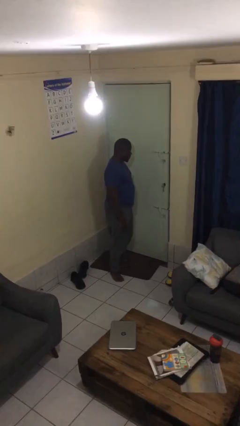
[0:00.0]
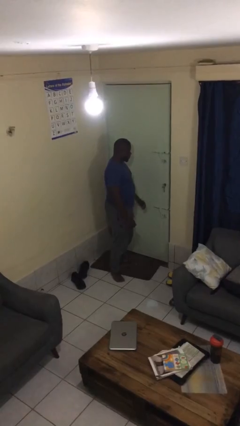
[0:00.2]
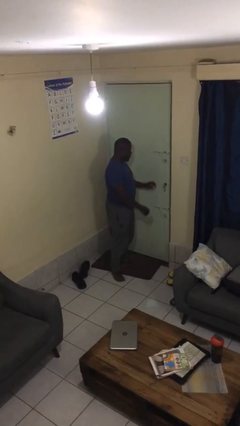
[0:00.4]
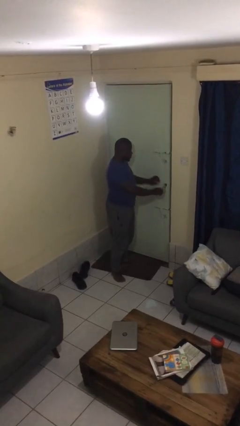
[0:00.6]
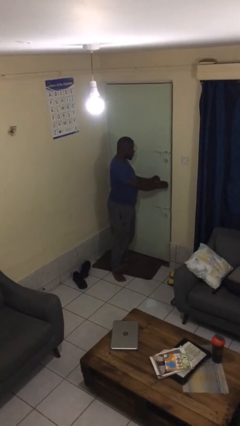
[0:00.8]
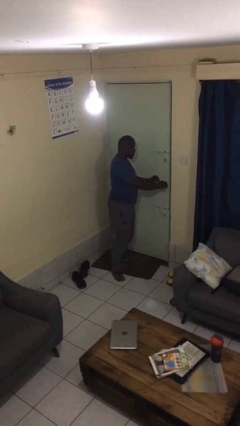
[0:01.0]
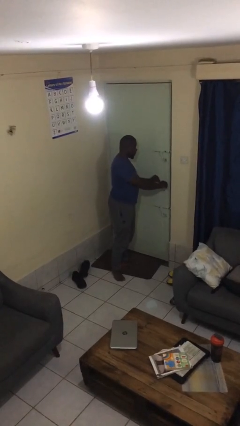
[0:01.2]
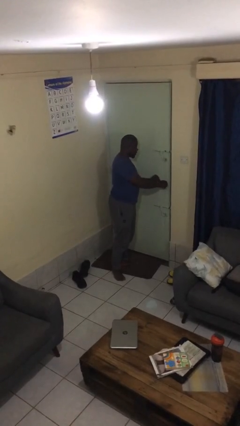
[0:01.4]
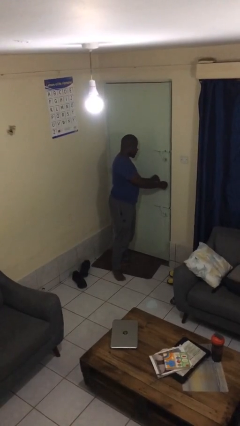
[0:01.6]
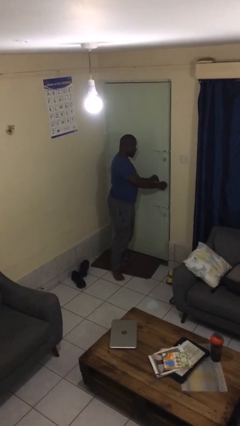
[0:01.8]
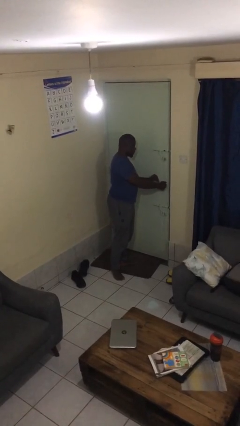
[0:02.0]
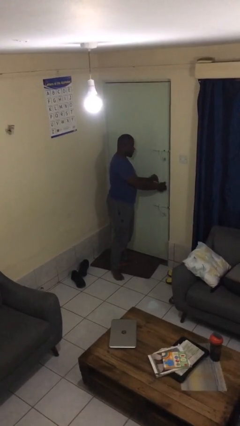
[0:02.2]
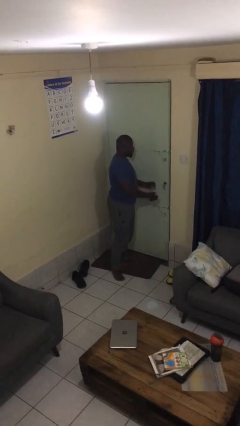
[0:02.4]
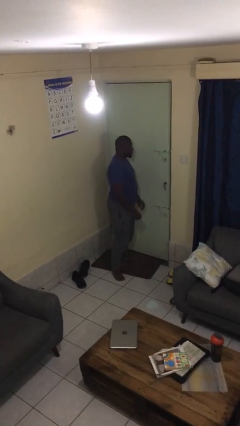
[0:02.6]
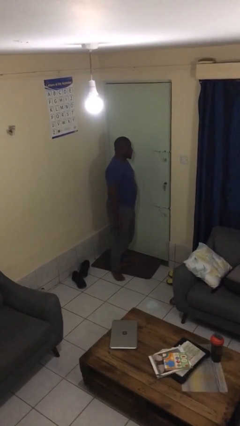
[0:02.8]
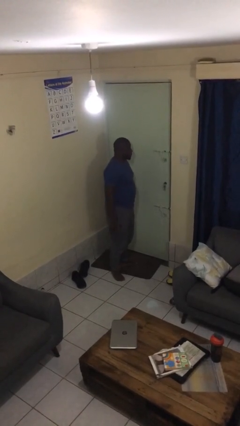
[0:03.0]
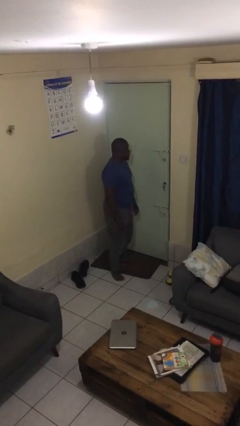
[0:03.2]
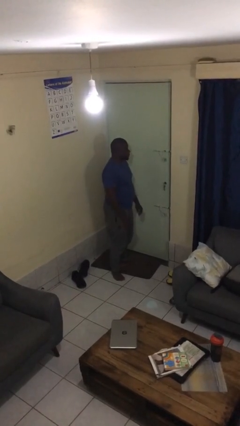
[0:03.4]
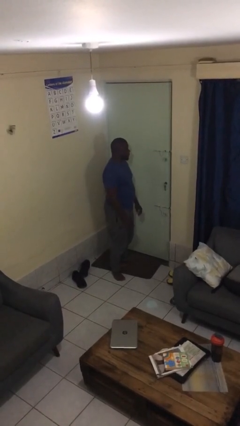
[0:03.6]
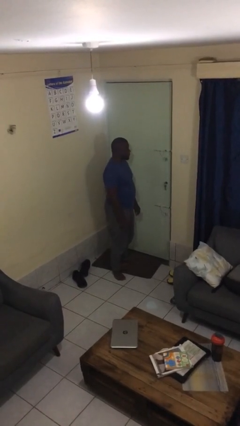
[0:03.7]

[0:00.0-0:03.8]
person locks door with keys

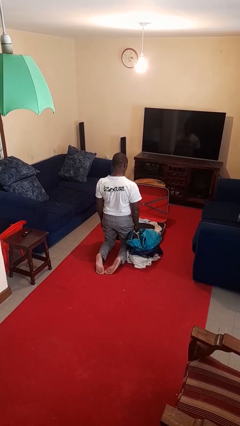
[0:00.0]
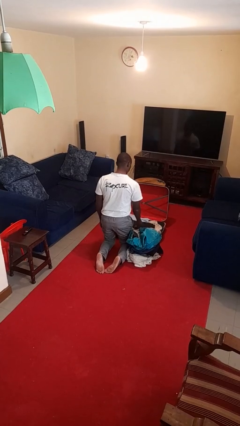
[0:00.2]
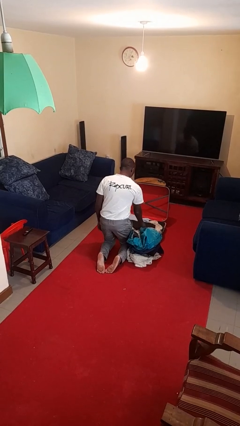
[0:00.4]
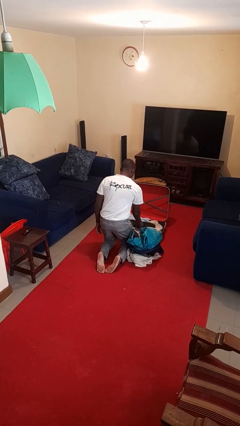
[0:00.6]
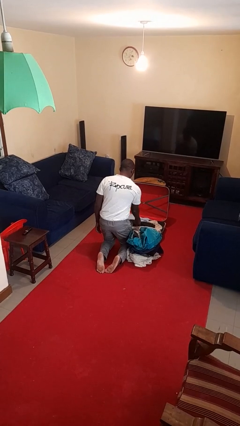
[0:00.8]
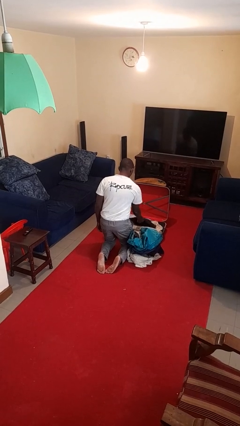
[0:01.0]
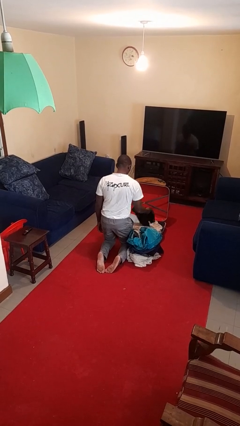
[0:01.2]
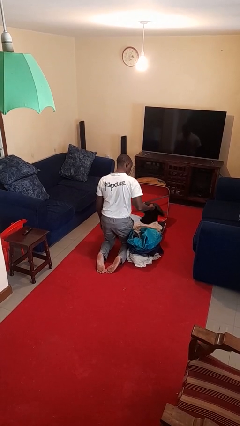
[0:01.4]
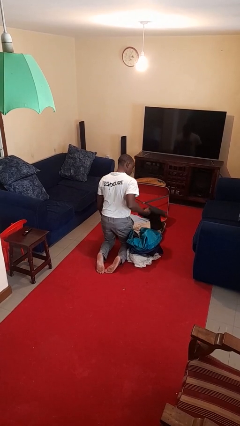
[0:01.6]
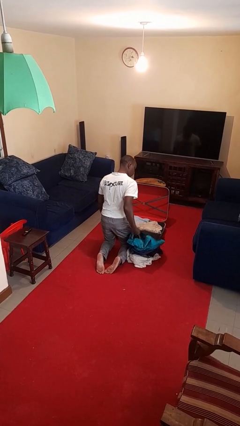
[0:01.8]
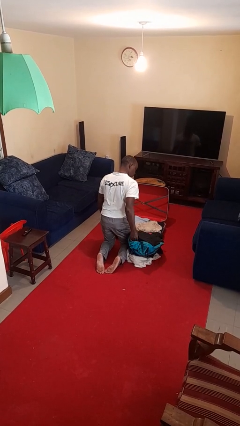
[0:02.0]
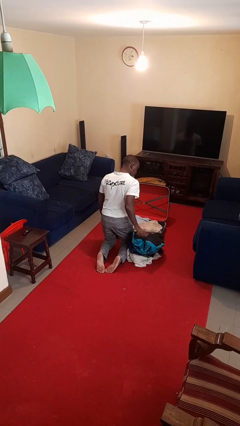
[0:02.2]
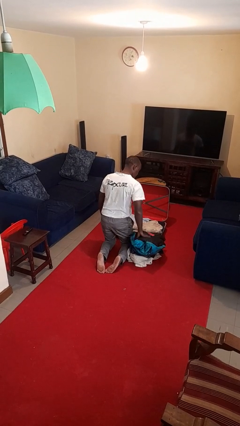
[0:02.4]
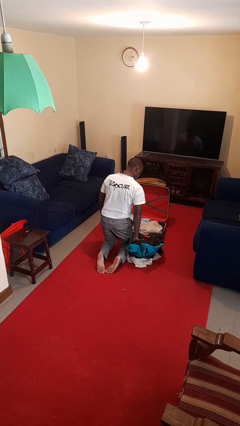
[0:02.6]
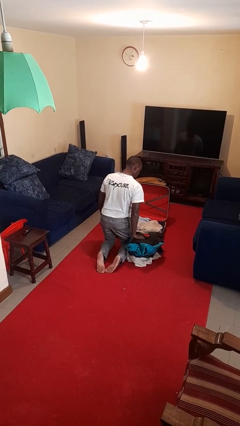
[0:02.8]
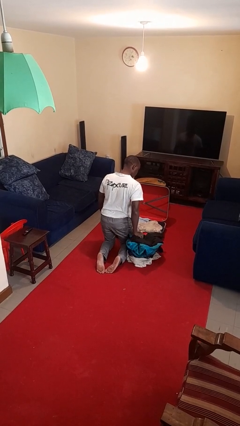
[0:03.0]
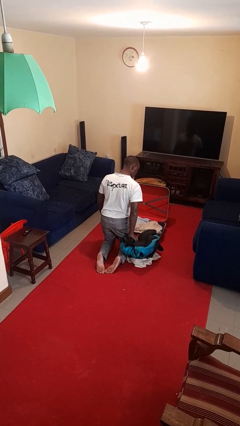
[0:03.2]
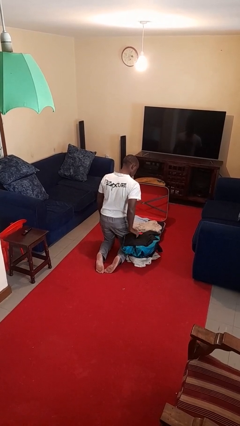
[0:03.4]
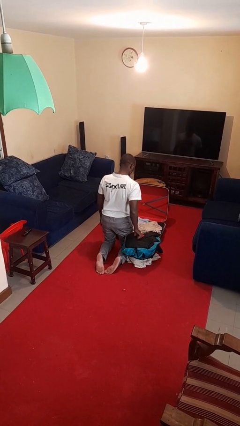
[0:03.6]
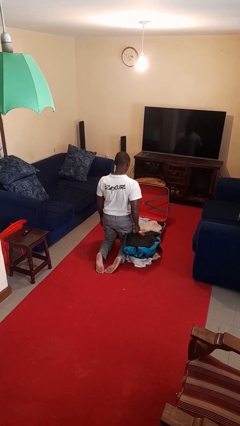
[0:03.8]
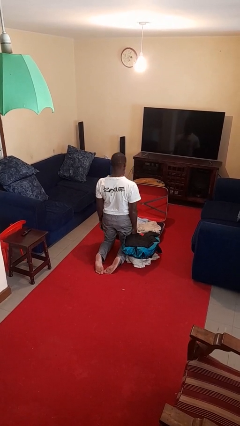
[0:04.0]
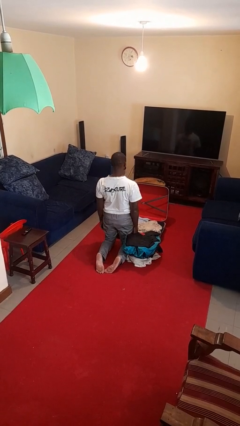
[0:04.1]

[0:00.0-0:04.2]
person unloads clothes from suitcase

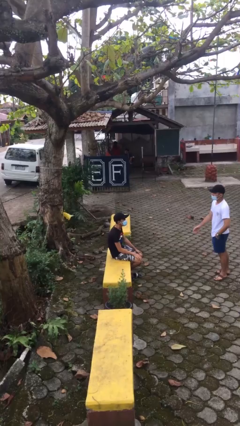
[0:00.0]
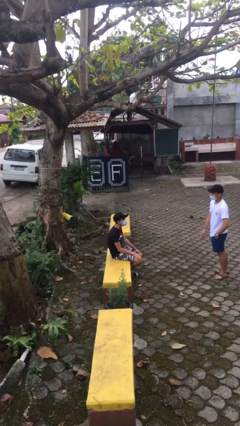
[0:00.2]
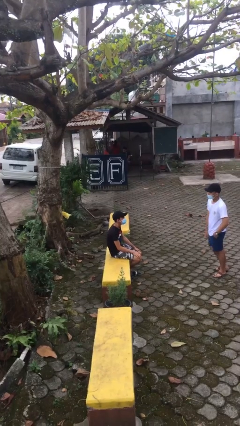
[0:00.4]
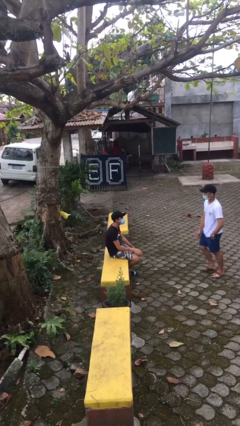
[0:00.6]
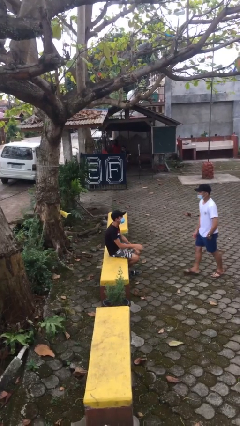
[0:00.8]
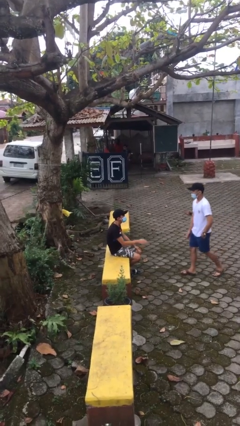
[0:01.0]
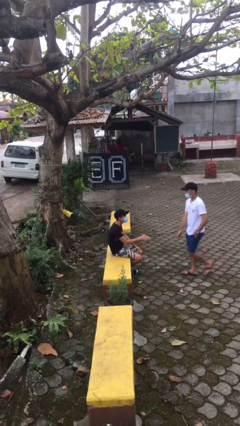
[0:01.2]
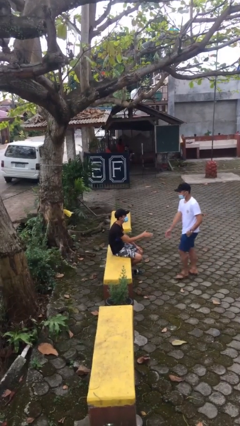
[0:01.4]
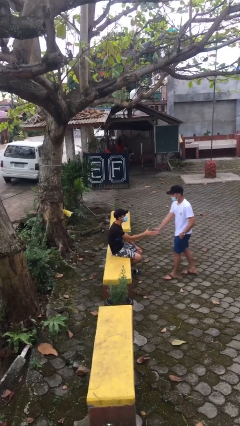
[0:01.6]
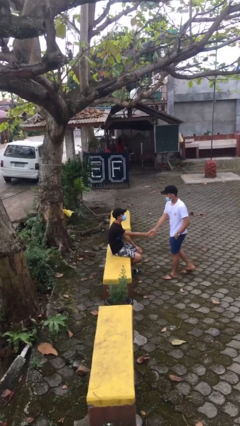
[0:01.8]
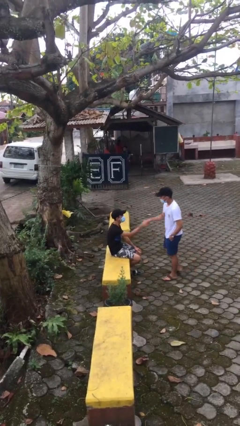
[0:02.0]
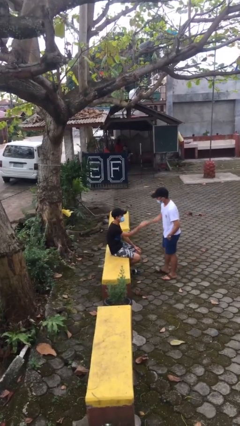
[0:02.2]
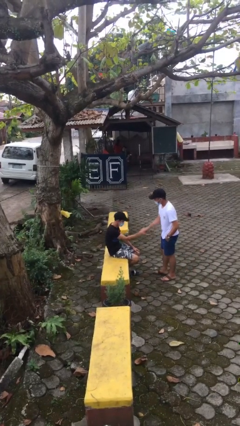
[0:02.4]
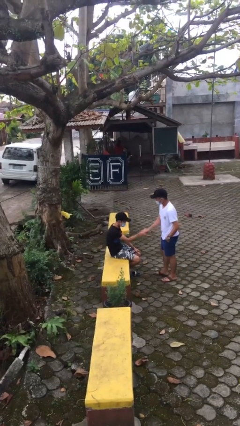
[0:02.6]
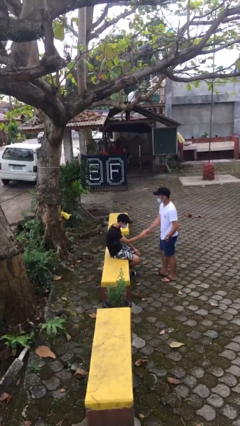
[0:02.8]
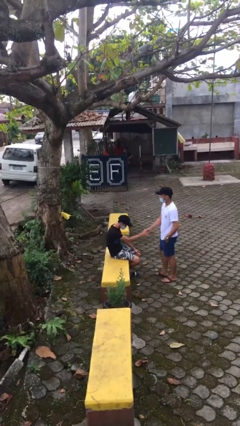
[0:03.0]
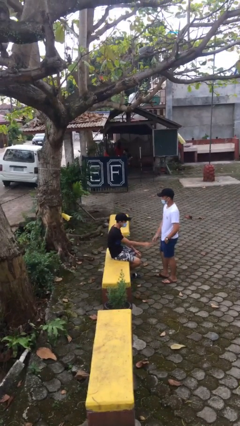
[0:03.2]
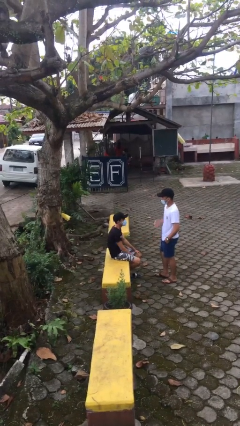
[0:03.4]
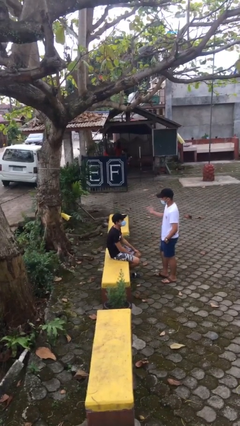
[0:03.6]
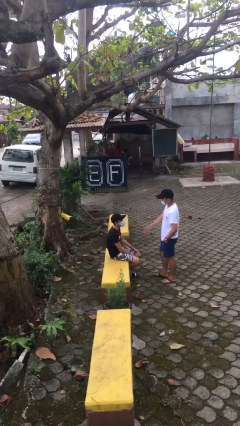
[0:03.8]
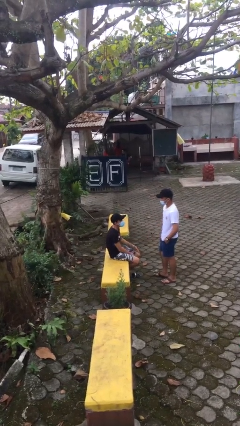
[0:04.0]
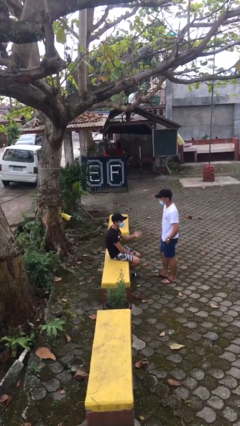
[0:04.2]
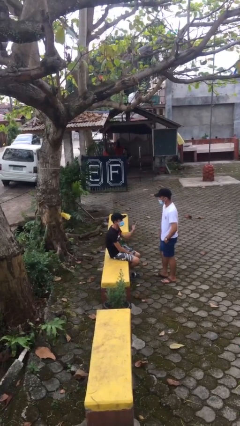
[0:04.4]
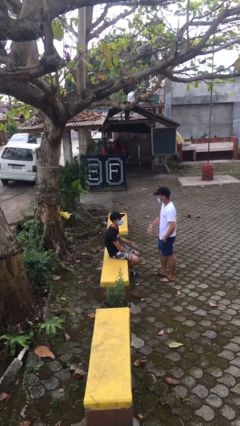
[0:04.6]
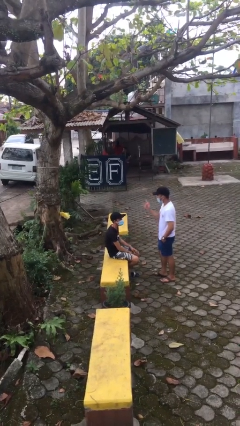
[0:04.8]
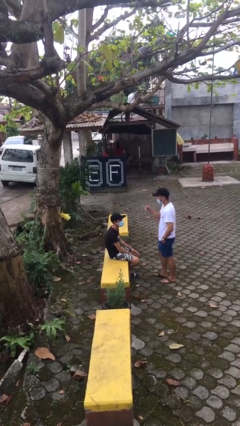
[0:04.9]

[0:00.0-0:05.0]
person shakes hand

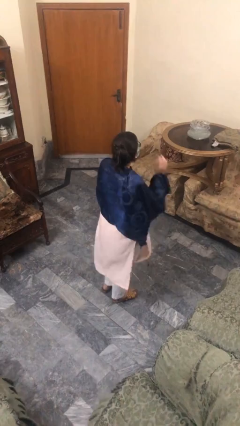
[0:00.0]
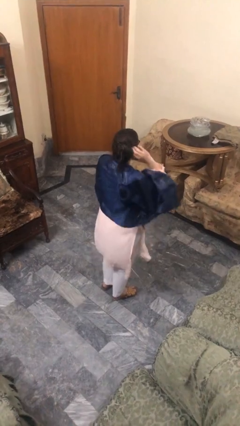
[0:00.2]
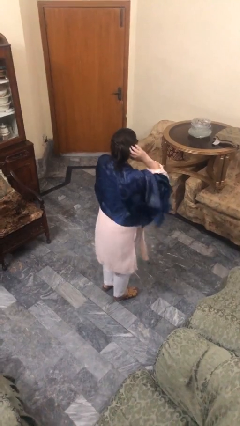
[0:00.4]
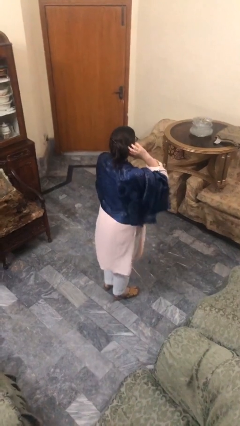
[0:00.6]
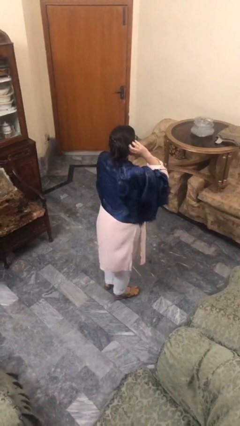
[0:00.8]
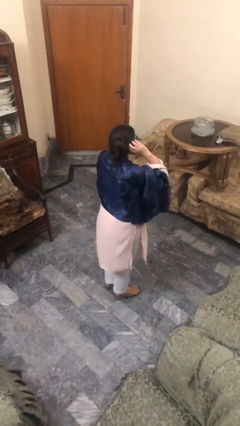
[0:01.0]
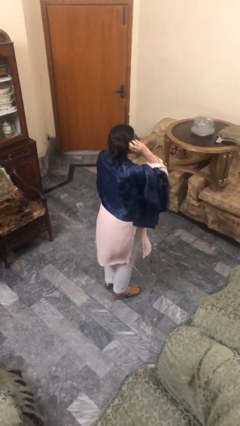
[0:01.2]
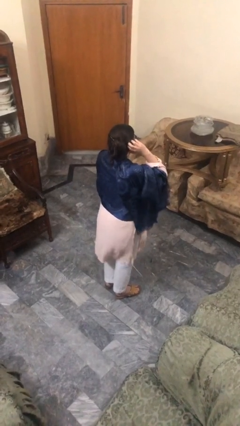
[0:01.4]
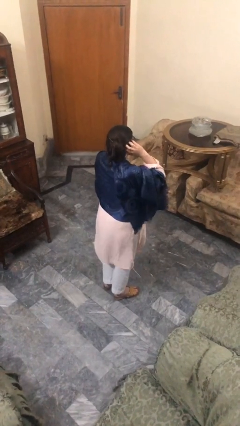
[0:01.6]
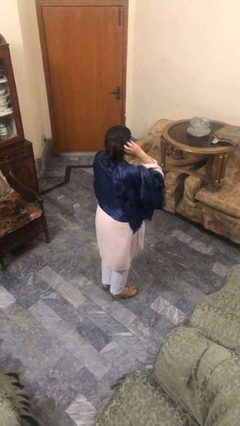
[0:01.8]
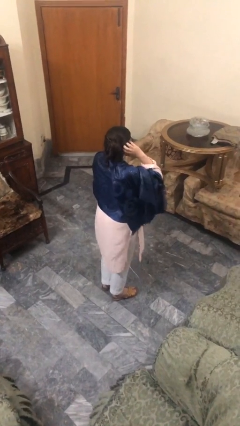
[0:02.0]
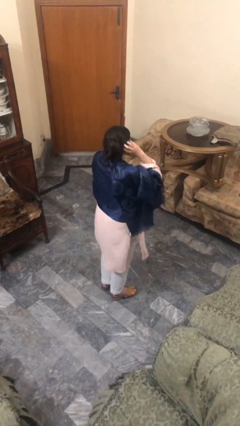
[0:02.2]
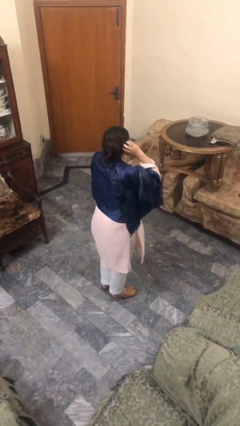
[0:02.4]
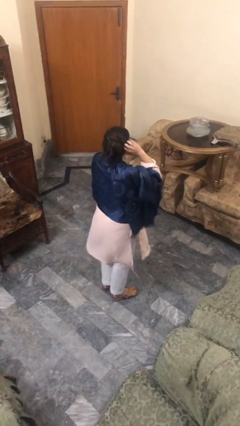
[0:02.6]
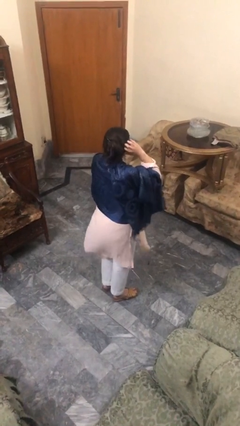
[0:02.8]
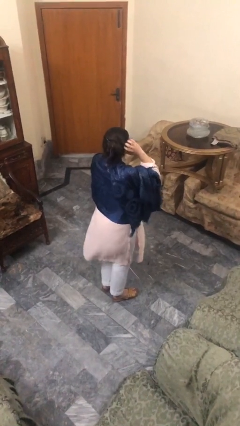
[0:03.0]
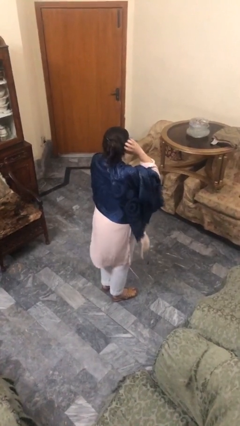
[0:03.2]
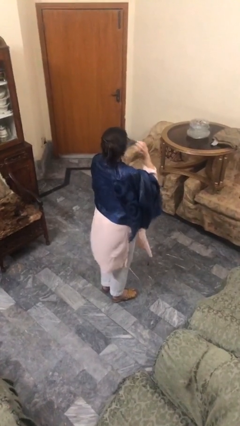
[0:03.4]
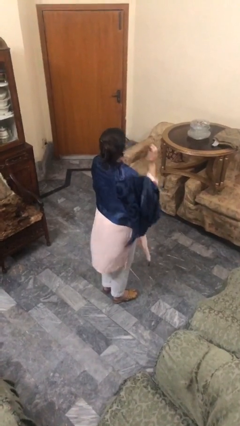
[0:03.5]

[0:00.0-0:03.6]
person scratches face

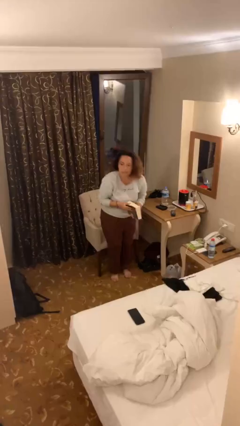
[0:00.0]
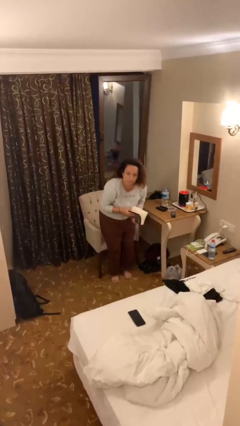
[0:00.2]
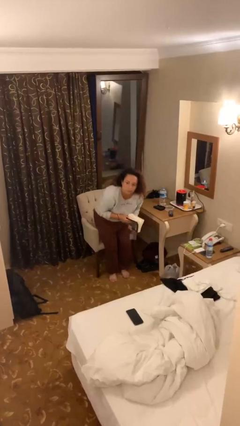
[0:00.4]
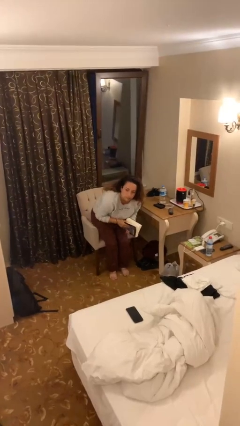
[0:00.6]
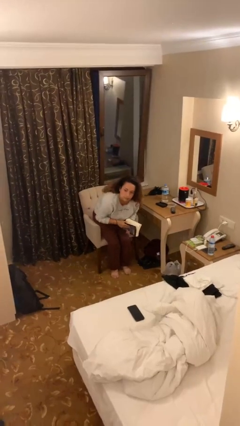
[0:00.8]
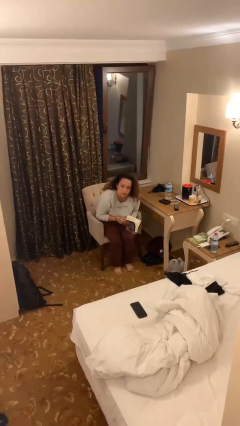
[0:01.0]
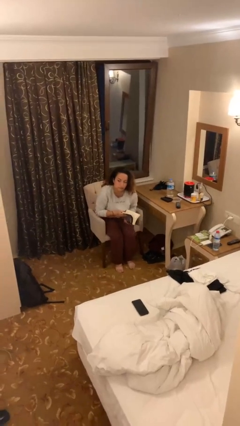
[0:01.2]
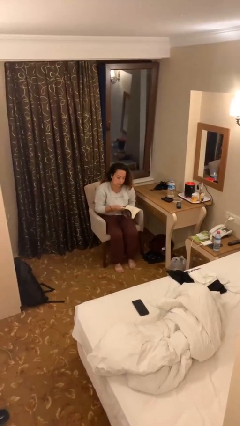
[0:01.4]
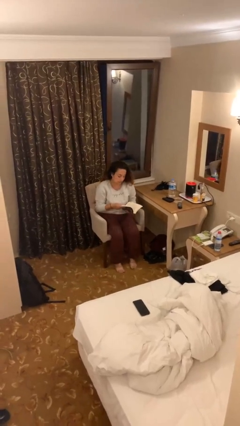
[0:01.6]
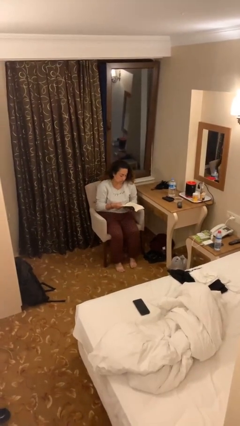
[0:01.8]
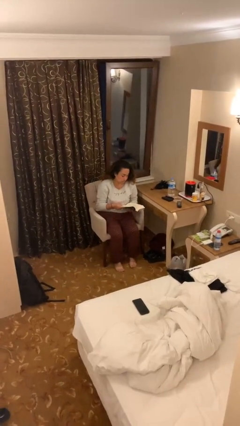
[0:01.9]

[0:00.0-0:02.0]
person sits down
